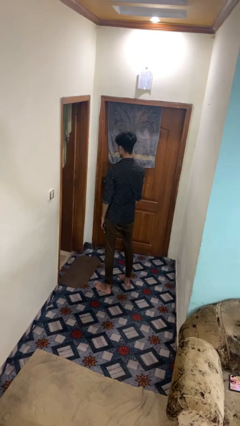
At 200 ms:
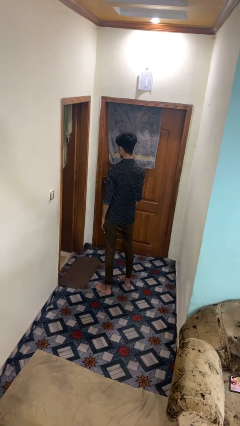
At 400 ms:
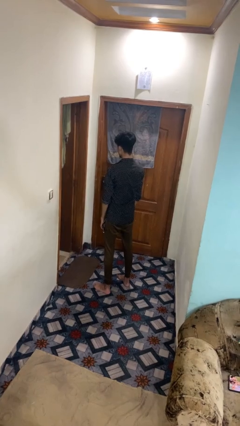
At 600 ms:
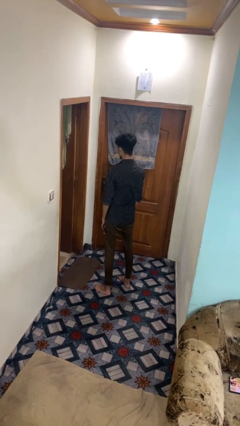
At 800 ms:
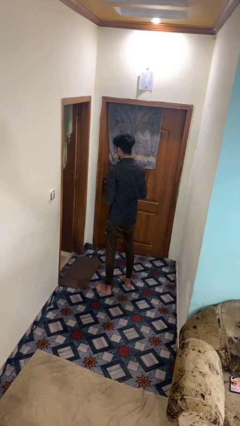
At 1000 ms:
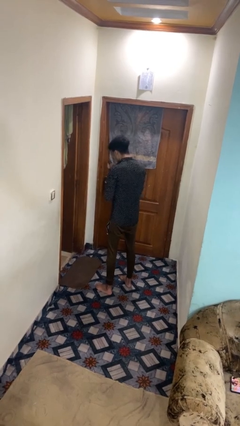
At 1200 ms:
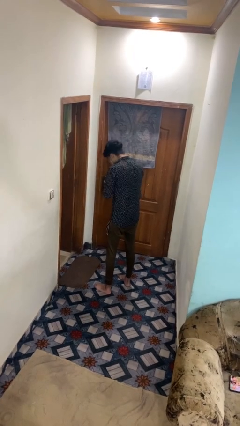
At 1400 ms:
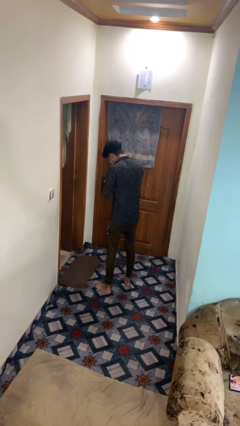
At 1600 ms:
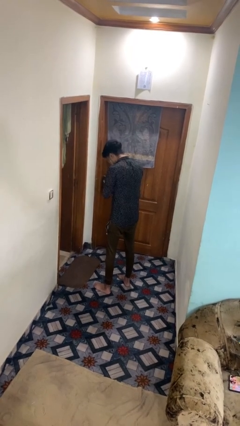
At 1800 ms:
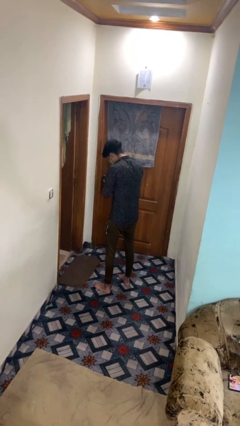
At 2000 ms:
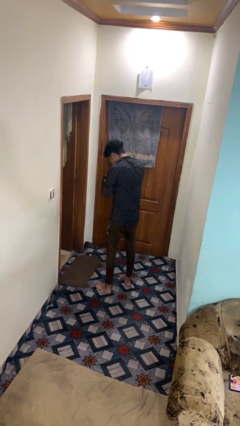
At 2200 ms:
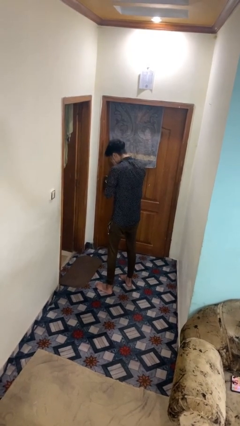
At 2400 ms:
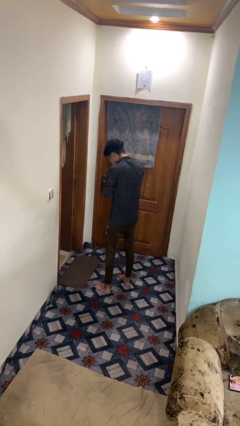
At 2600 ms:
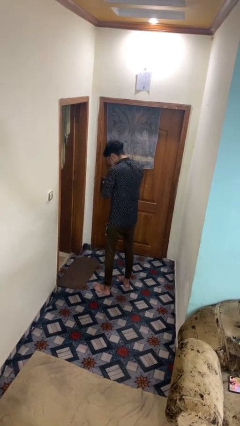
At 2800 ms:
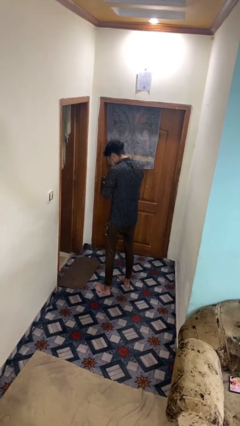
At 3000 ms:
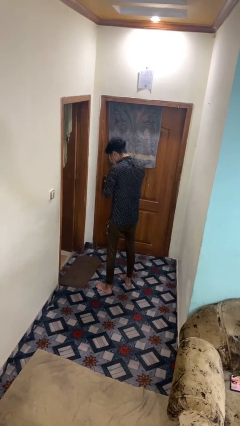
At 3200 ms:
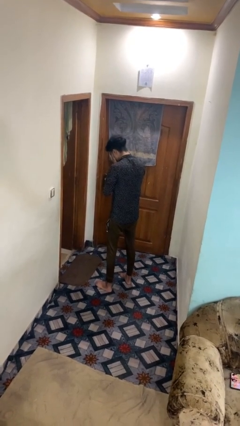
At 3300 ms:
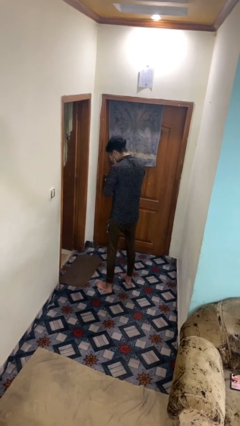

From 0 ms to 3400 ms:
person sneezes into hand

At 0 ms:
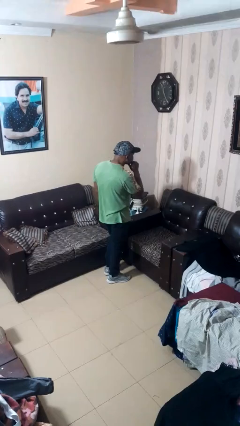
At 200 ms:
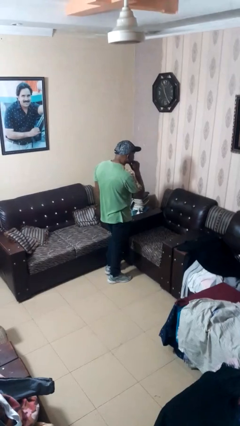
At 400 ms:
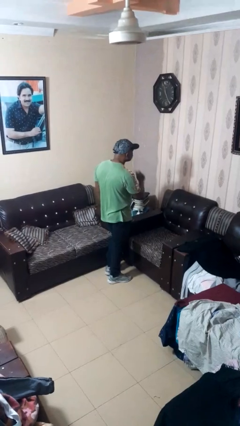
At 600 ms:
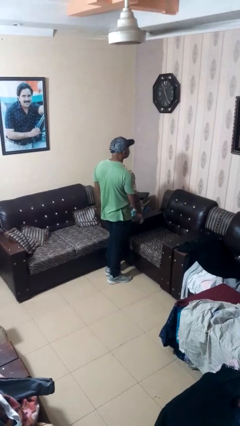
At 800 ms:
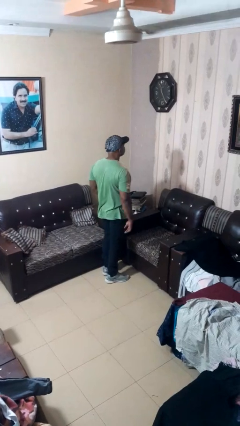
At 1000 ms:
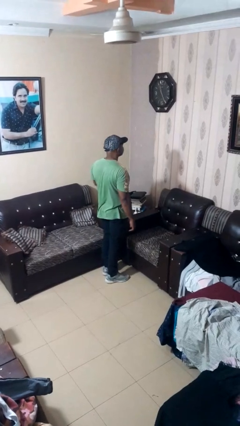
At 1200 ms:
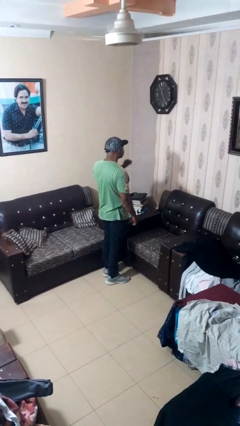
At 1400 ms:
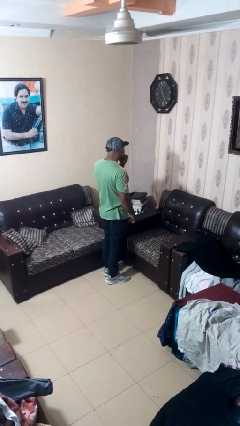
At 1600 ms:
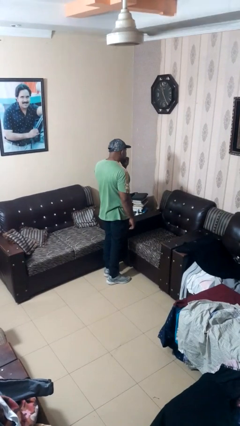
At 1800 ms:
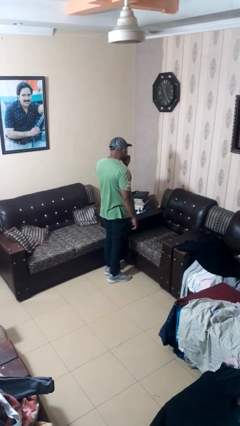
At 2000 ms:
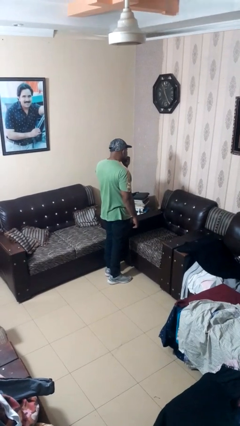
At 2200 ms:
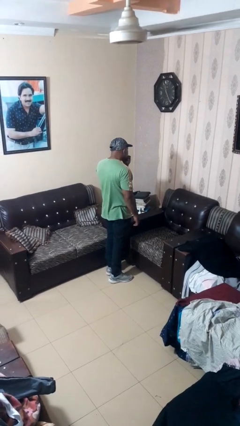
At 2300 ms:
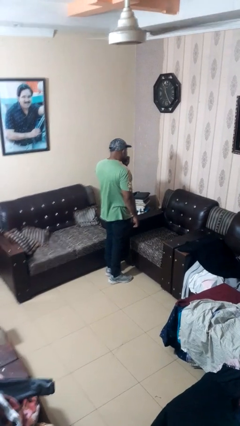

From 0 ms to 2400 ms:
person strokes chin

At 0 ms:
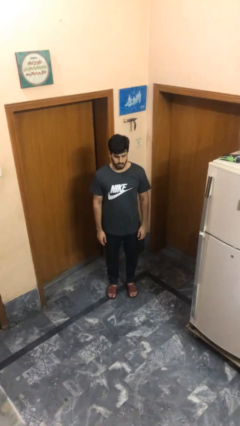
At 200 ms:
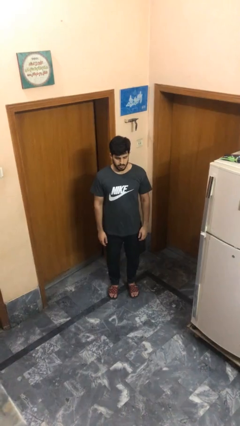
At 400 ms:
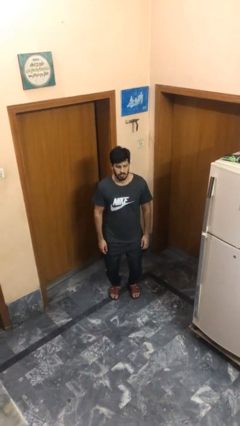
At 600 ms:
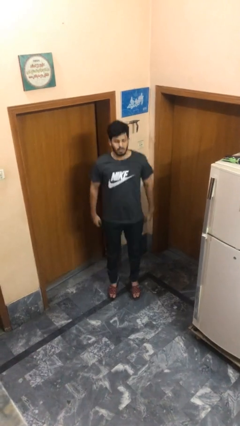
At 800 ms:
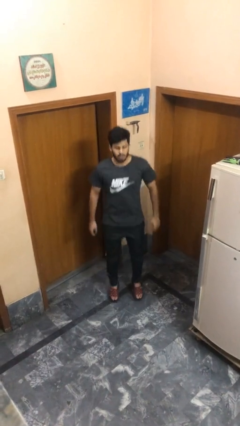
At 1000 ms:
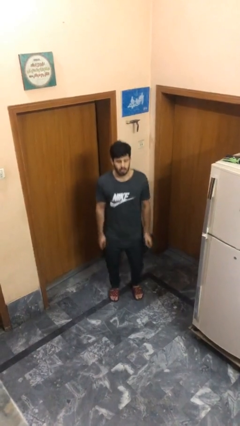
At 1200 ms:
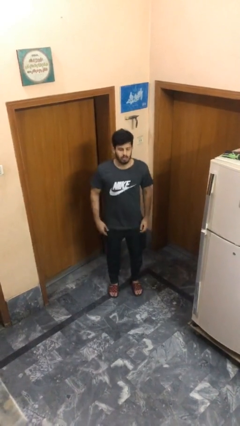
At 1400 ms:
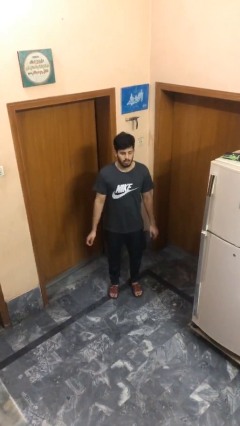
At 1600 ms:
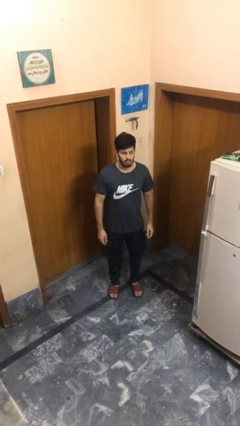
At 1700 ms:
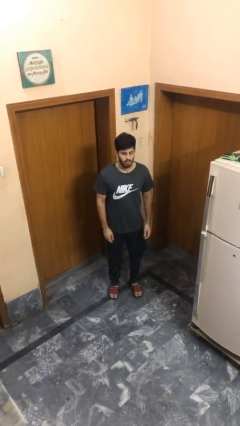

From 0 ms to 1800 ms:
person jumps

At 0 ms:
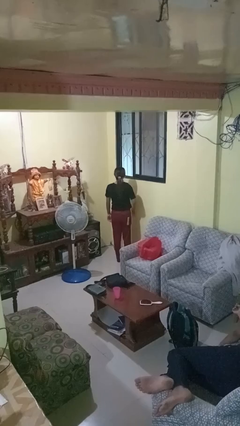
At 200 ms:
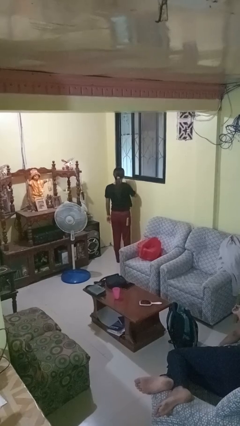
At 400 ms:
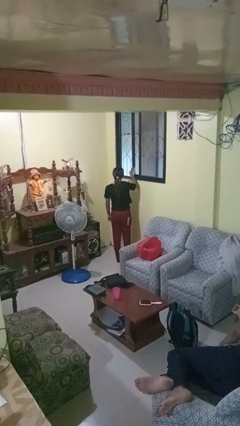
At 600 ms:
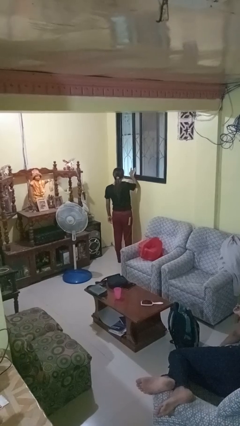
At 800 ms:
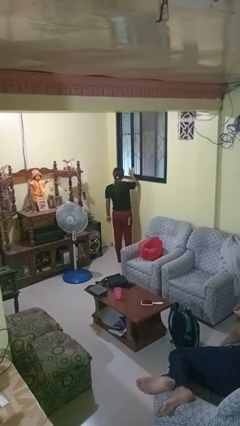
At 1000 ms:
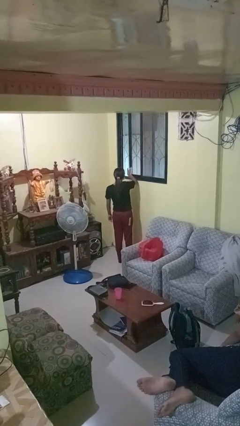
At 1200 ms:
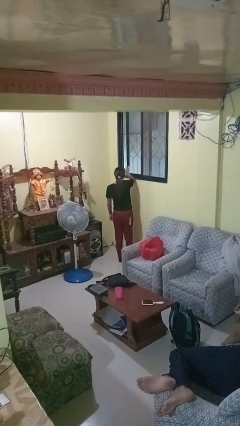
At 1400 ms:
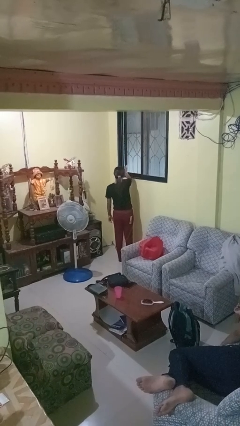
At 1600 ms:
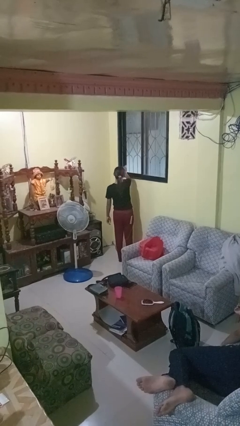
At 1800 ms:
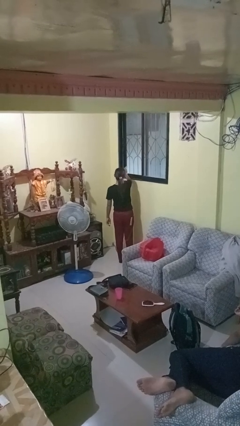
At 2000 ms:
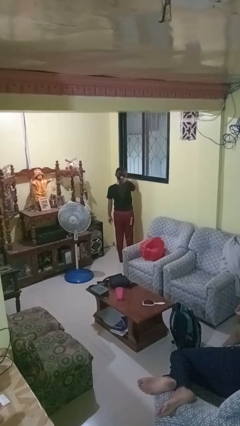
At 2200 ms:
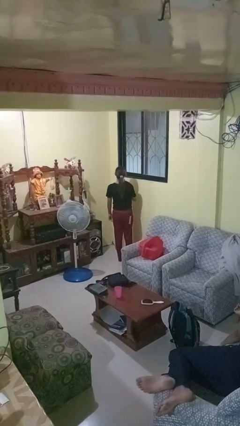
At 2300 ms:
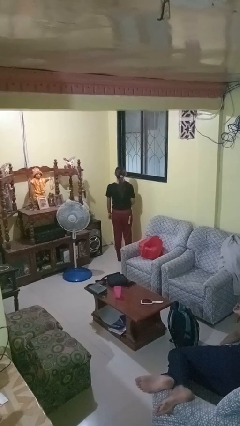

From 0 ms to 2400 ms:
person closes home window

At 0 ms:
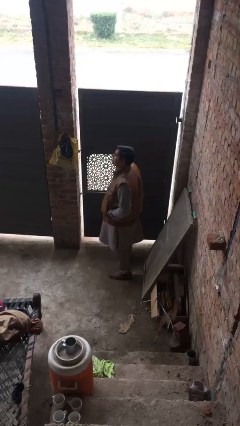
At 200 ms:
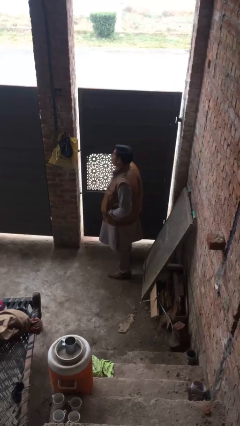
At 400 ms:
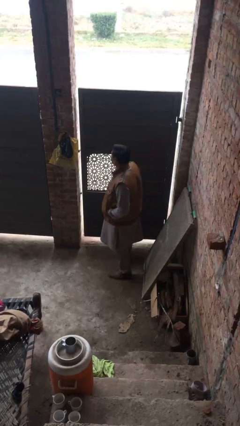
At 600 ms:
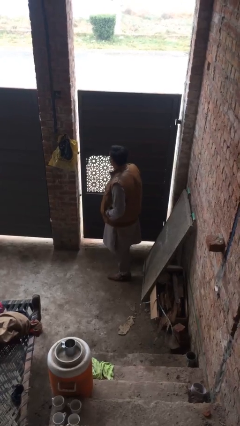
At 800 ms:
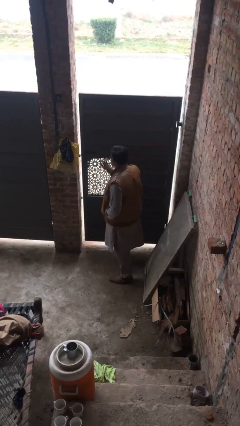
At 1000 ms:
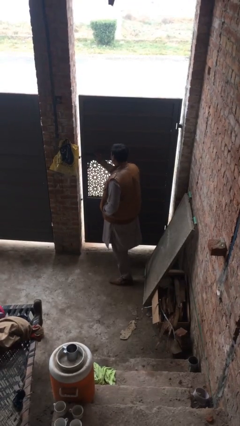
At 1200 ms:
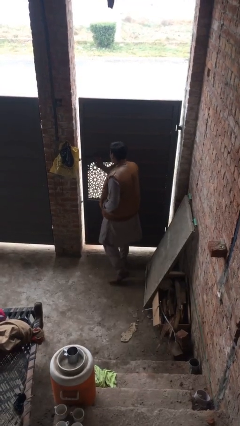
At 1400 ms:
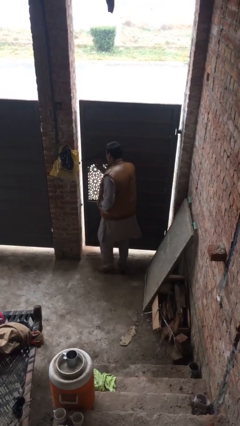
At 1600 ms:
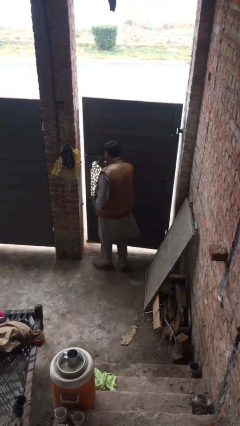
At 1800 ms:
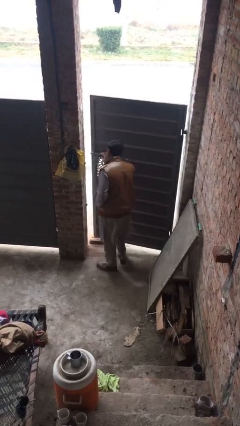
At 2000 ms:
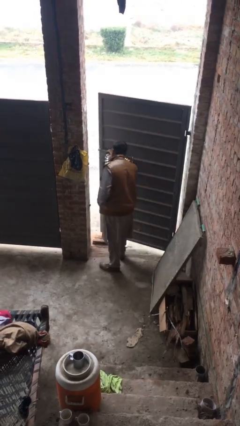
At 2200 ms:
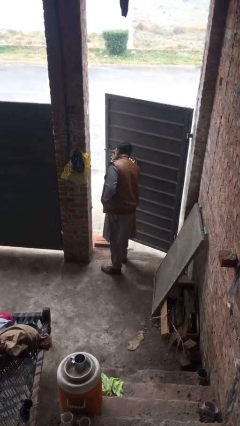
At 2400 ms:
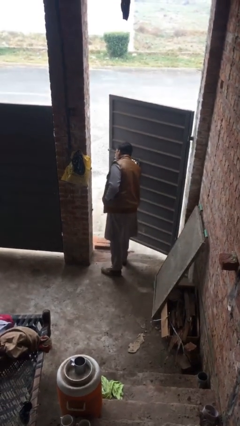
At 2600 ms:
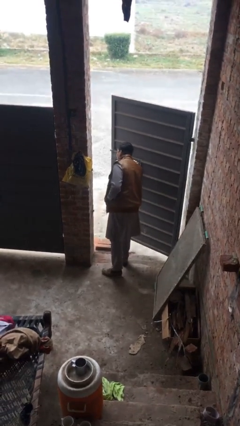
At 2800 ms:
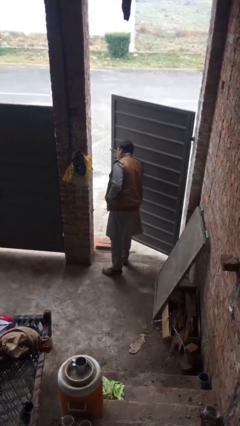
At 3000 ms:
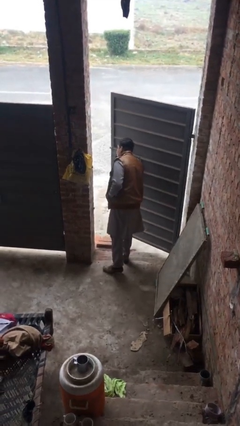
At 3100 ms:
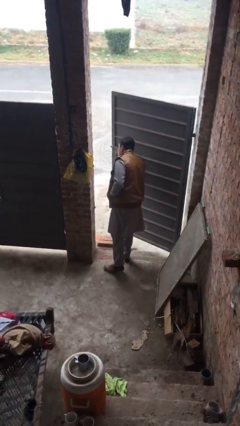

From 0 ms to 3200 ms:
person opens facility door

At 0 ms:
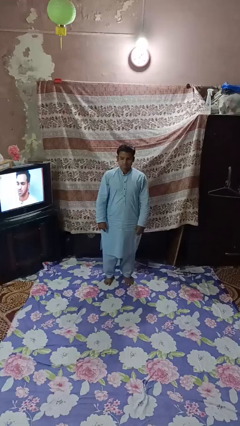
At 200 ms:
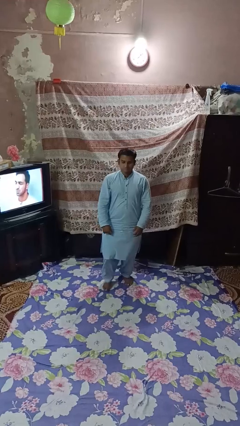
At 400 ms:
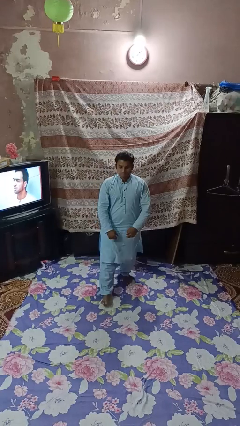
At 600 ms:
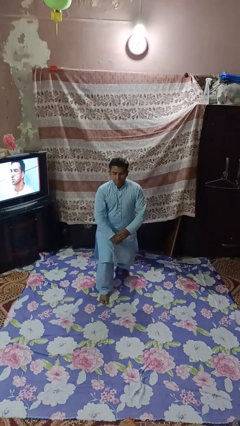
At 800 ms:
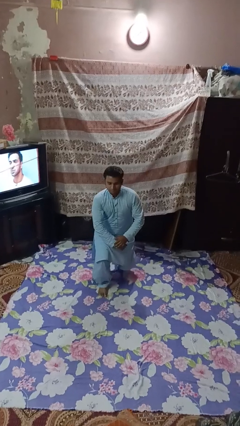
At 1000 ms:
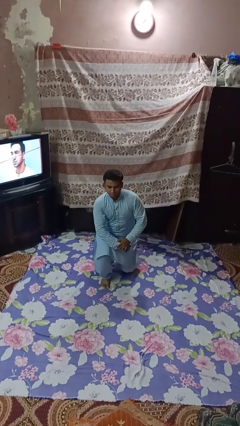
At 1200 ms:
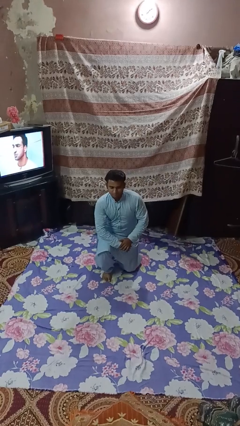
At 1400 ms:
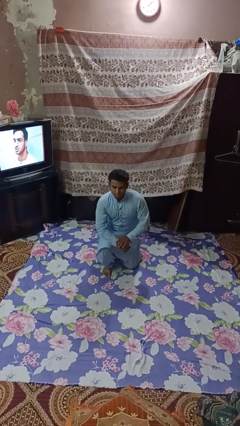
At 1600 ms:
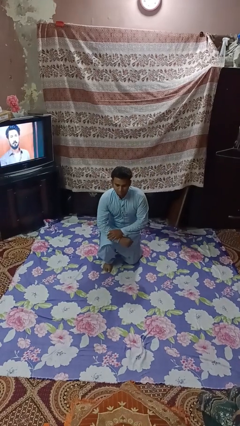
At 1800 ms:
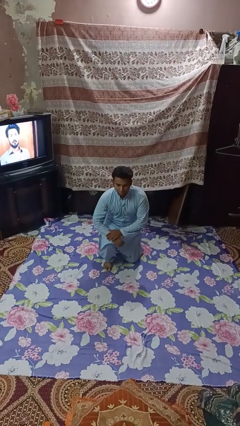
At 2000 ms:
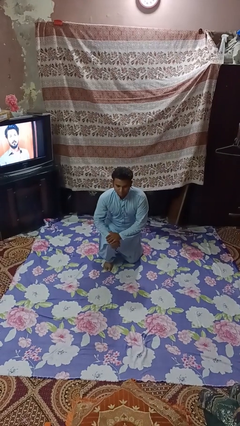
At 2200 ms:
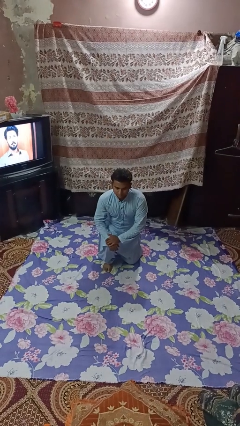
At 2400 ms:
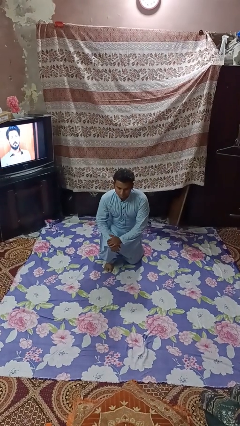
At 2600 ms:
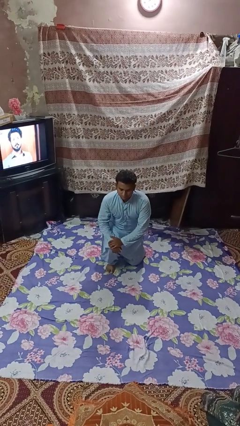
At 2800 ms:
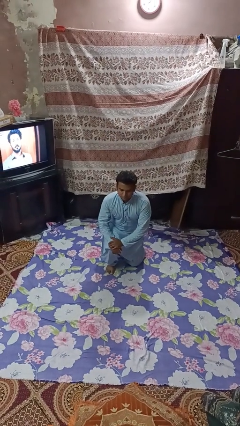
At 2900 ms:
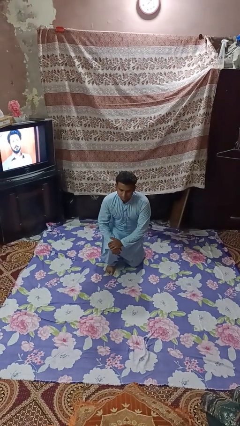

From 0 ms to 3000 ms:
person exercises with lunges

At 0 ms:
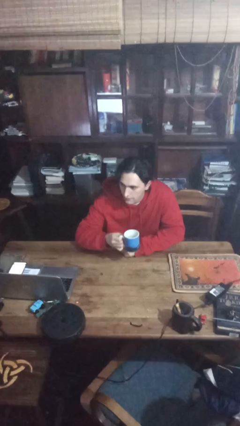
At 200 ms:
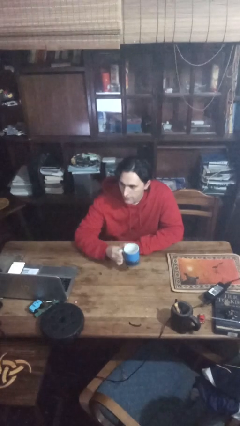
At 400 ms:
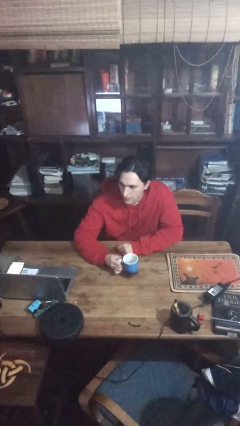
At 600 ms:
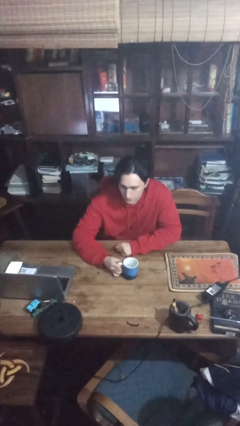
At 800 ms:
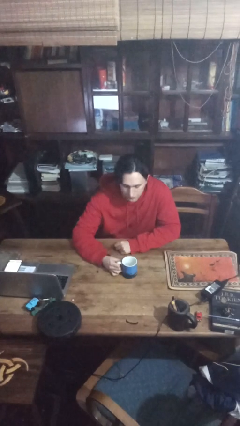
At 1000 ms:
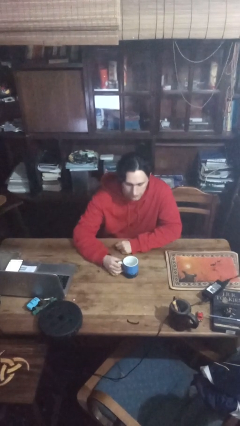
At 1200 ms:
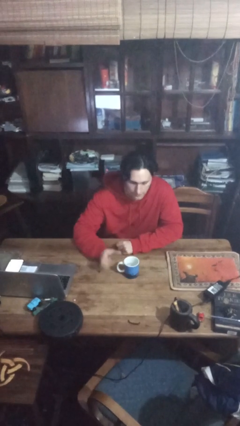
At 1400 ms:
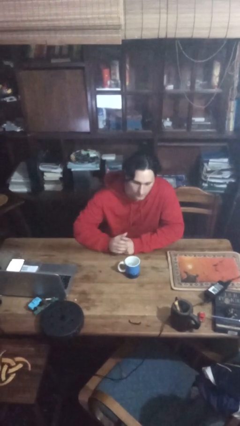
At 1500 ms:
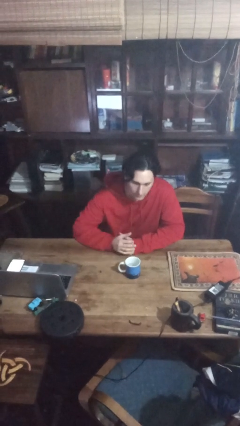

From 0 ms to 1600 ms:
person puts down object on table
